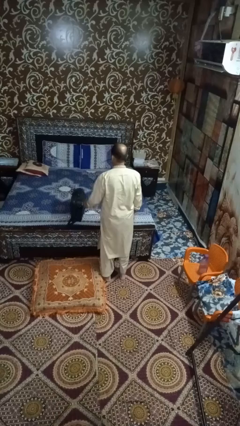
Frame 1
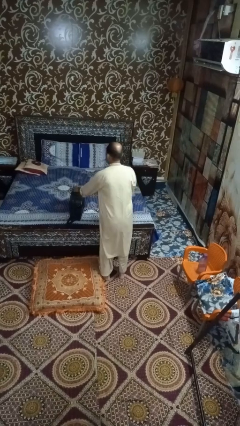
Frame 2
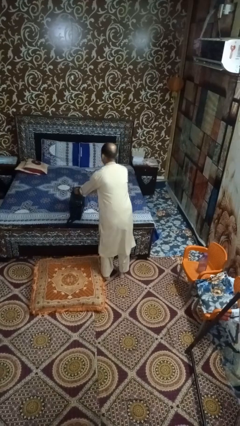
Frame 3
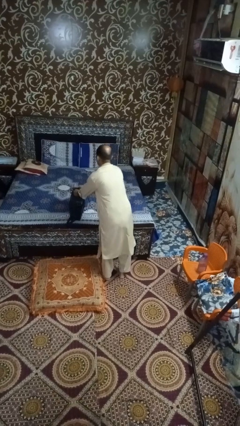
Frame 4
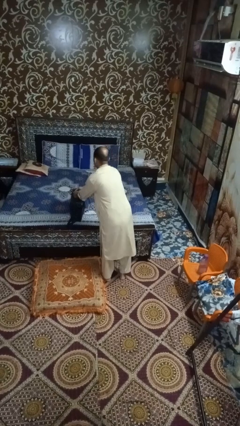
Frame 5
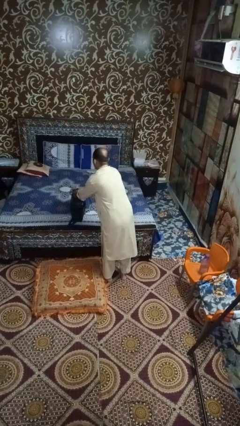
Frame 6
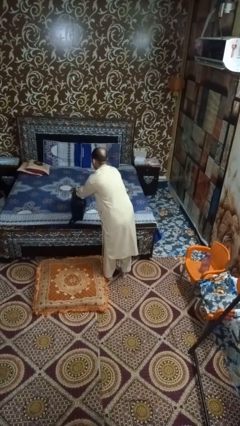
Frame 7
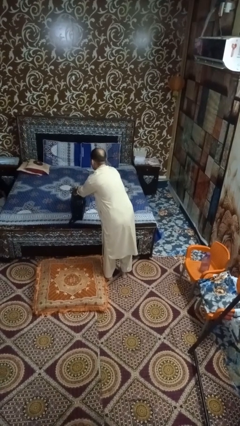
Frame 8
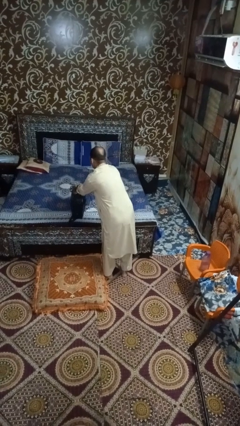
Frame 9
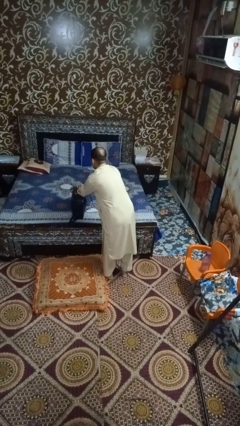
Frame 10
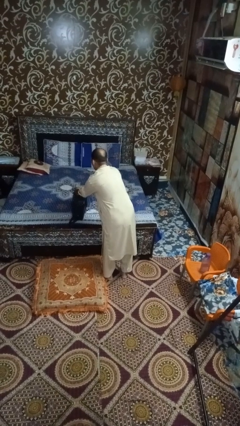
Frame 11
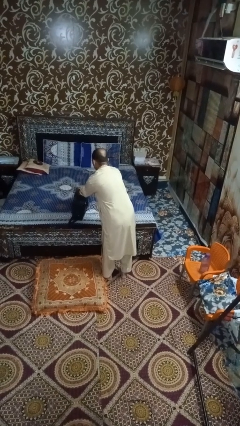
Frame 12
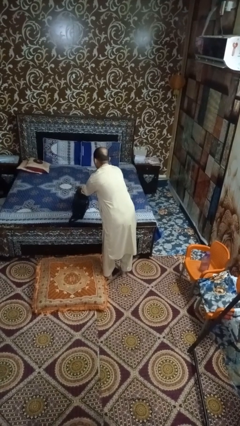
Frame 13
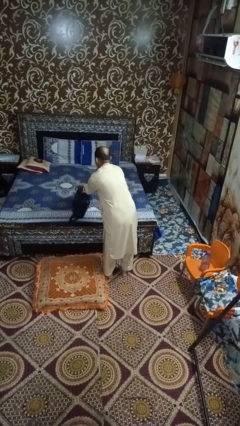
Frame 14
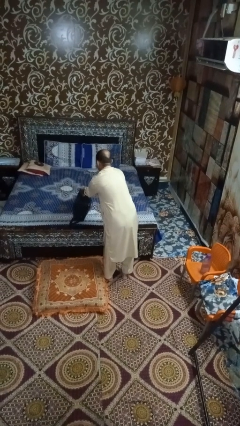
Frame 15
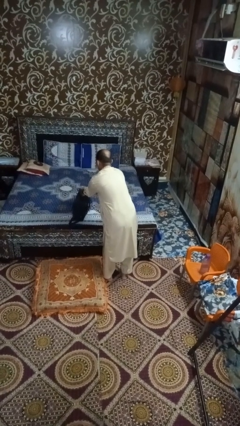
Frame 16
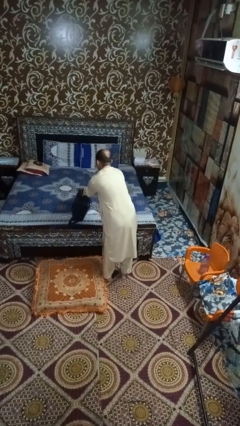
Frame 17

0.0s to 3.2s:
person picks up object from bed

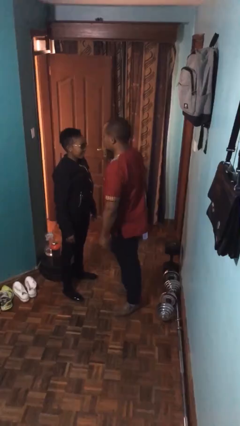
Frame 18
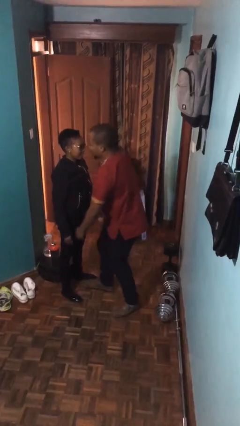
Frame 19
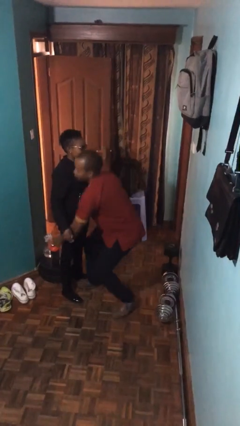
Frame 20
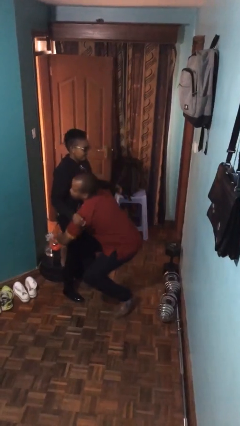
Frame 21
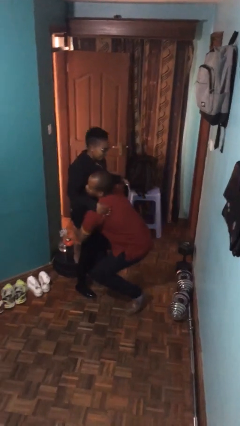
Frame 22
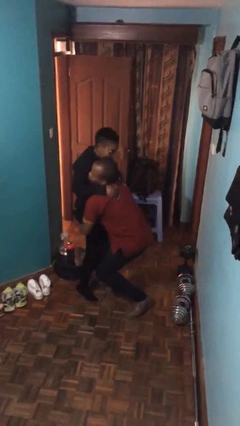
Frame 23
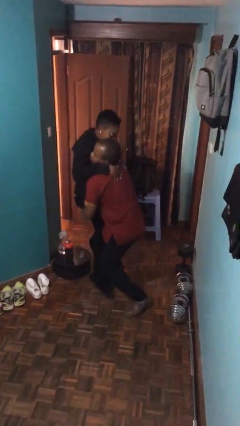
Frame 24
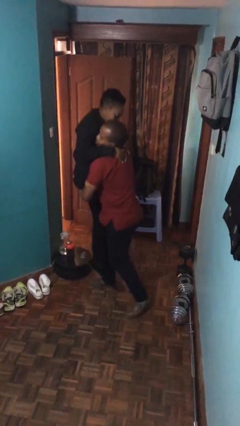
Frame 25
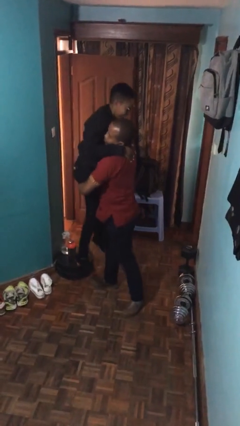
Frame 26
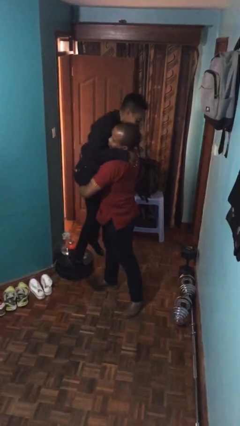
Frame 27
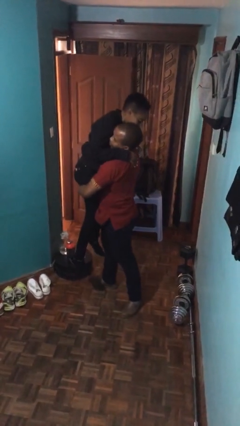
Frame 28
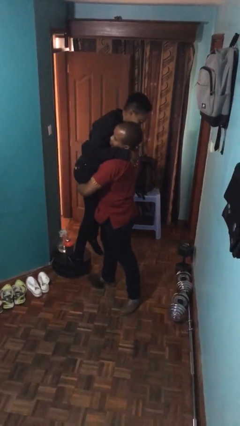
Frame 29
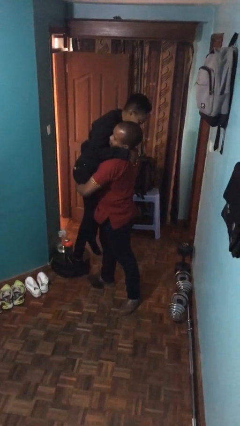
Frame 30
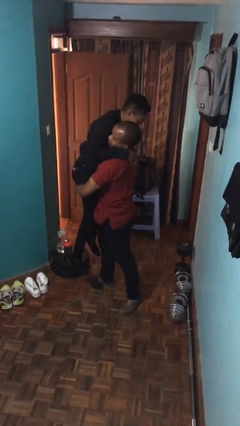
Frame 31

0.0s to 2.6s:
person picks up person

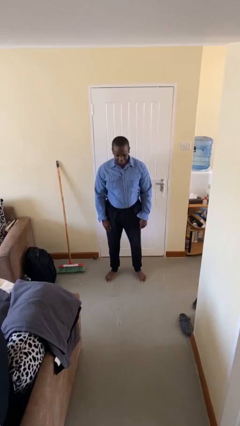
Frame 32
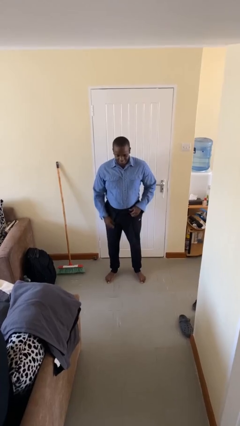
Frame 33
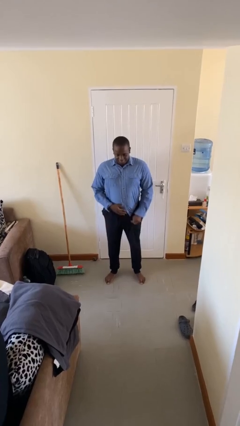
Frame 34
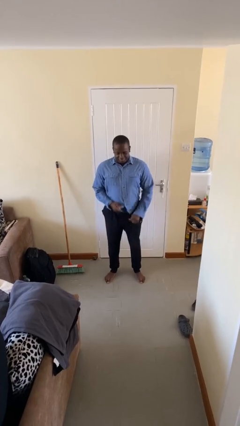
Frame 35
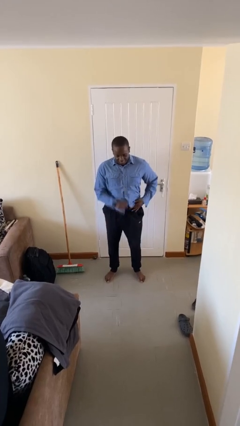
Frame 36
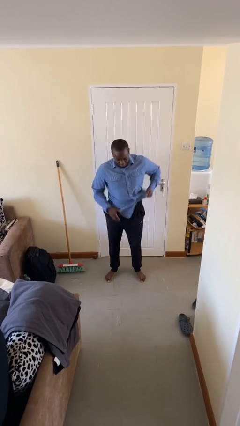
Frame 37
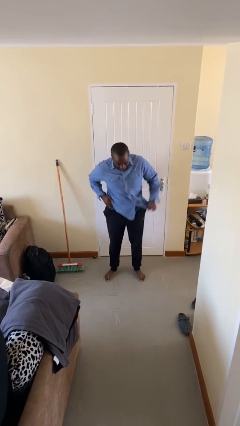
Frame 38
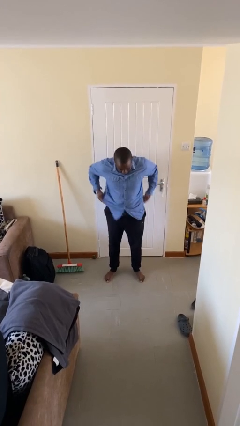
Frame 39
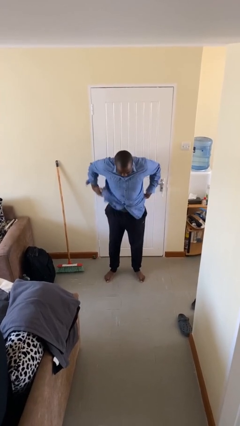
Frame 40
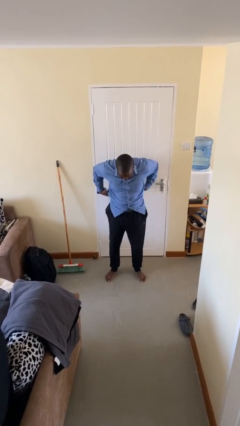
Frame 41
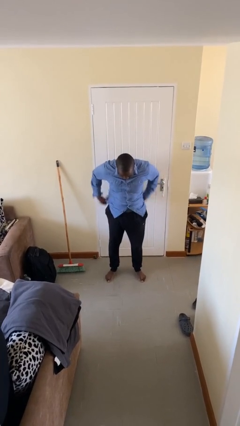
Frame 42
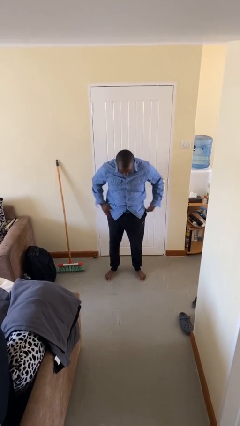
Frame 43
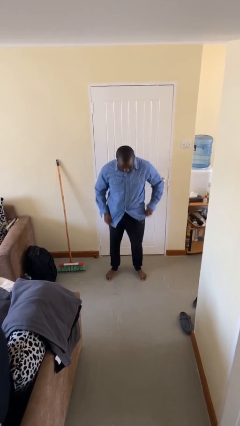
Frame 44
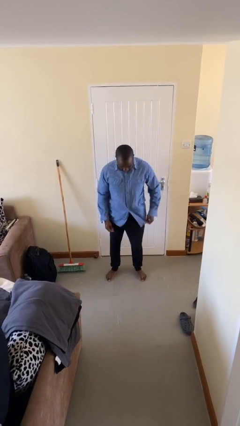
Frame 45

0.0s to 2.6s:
person untucks shirt

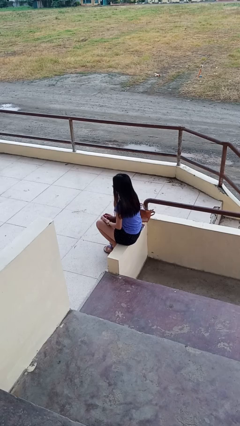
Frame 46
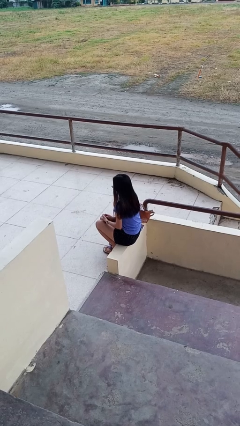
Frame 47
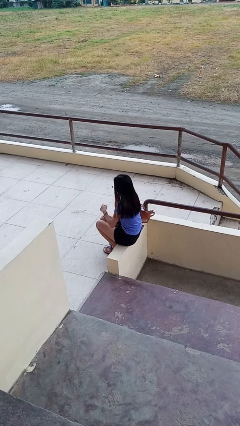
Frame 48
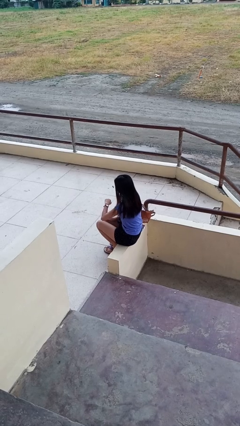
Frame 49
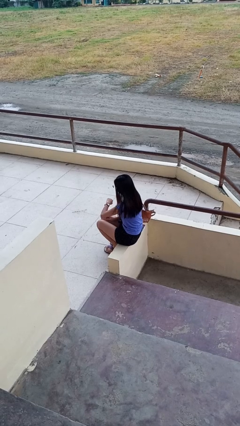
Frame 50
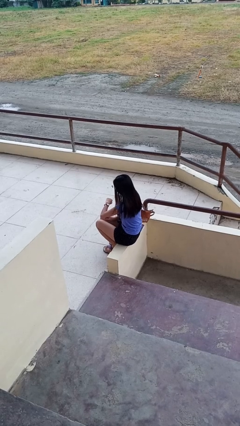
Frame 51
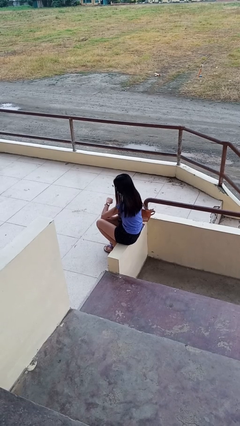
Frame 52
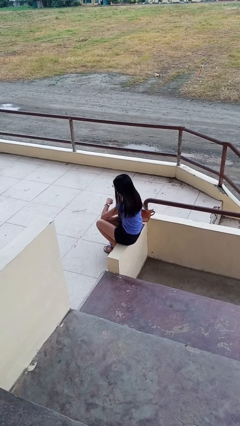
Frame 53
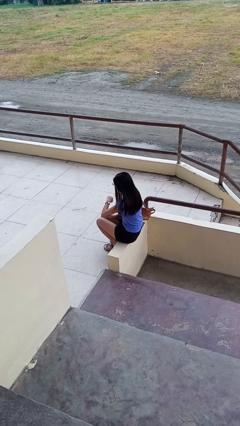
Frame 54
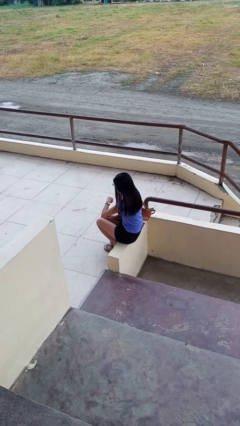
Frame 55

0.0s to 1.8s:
person looks at wristwatch

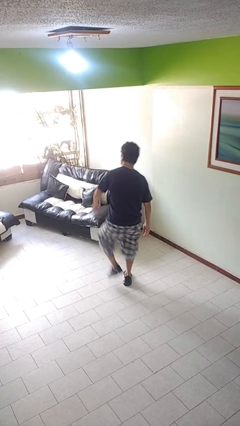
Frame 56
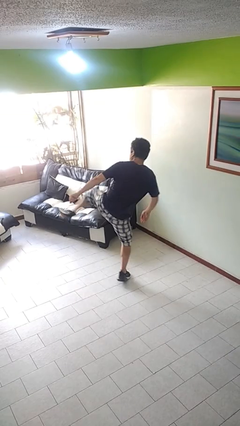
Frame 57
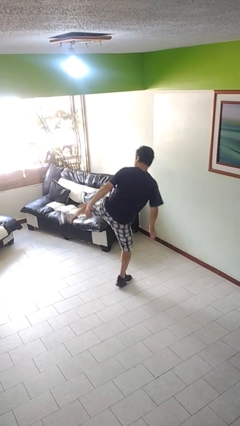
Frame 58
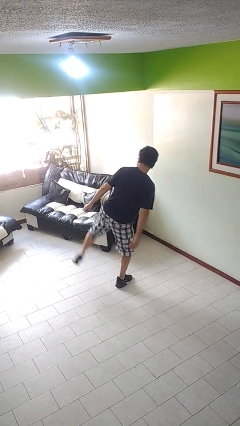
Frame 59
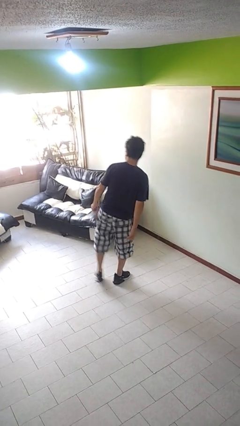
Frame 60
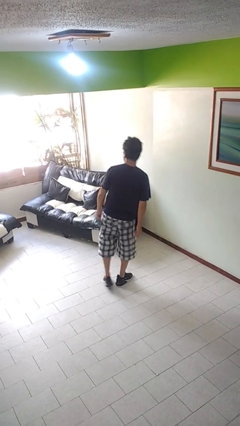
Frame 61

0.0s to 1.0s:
person karate kicks

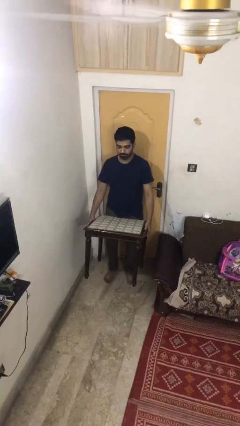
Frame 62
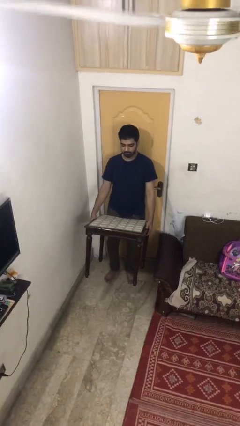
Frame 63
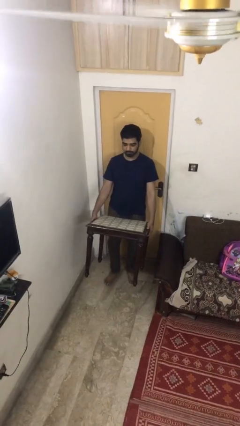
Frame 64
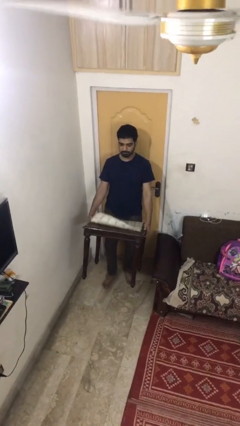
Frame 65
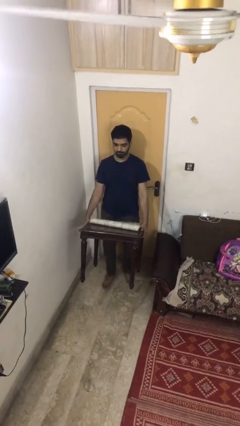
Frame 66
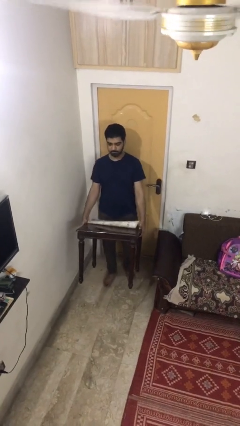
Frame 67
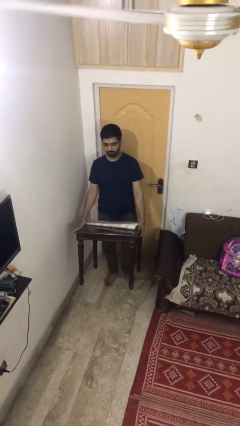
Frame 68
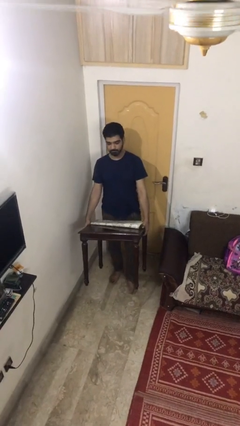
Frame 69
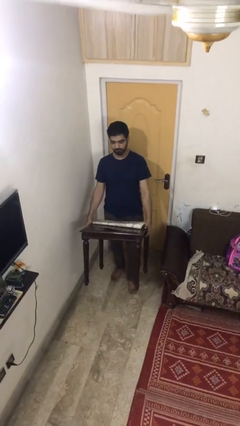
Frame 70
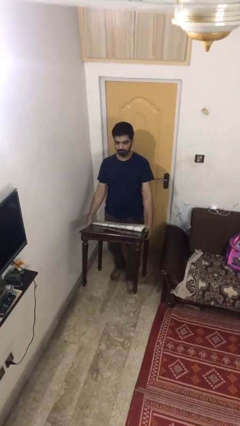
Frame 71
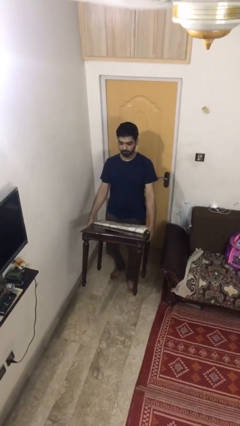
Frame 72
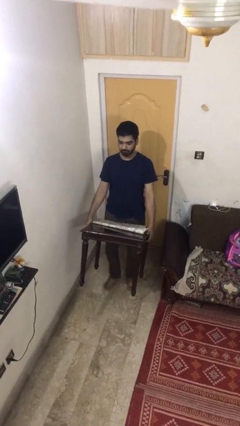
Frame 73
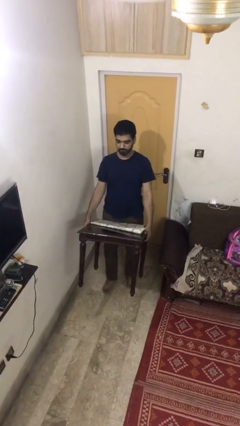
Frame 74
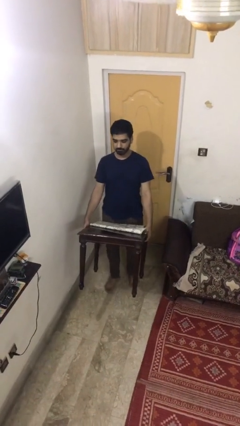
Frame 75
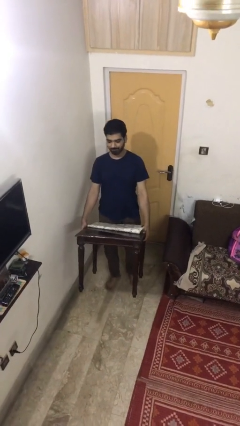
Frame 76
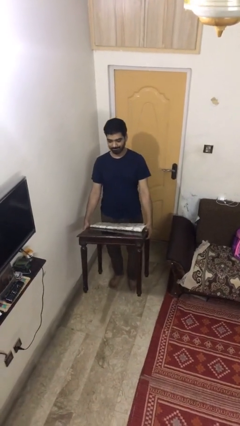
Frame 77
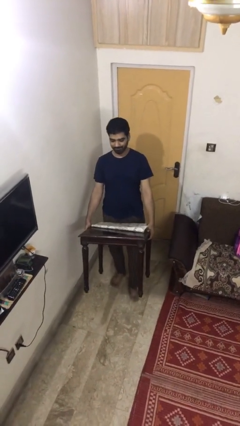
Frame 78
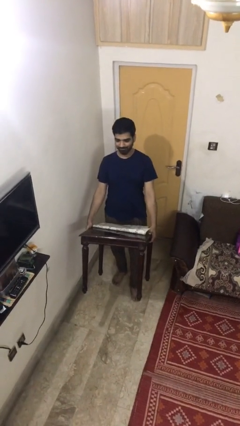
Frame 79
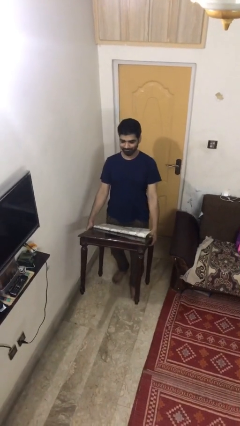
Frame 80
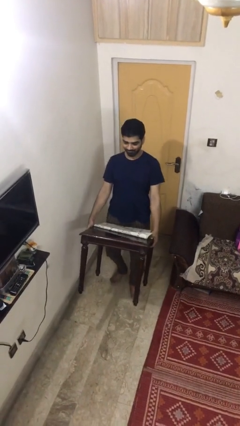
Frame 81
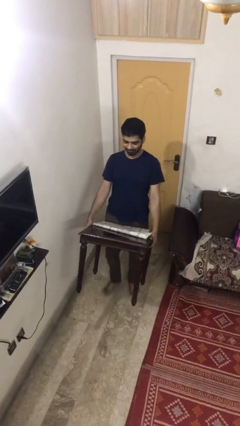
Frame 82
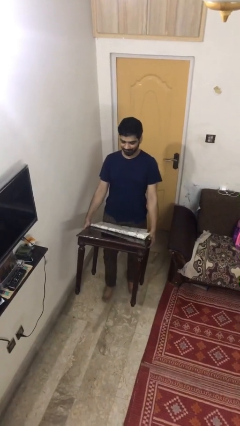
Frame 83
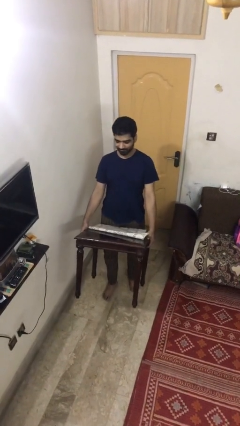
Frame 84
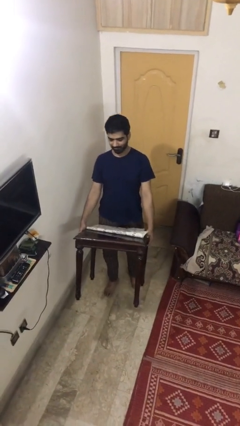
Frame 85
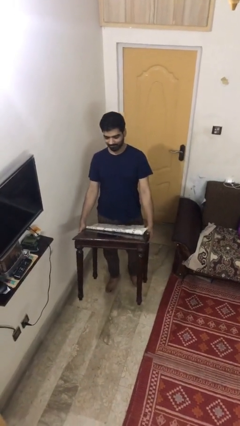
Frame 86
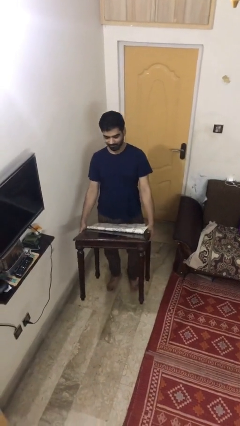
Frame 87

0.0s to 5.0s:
person carries heavy object

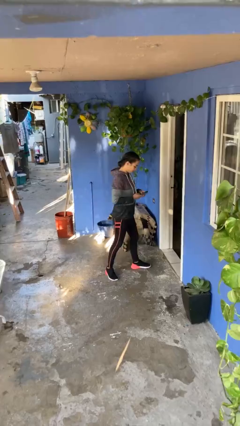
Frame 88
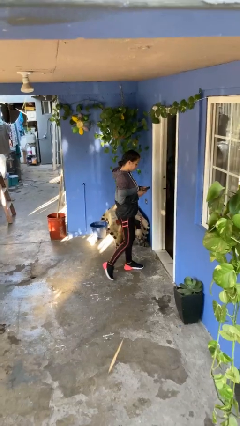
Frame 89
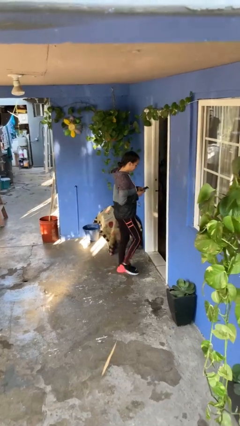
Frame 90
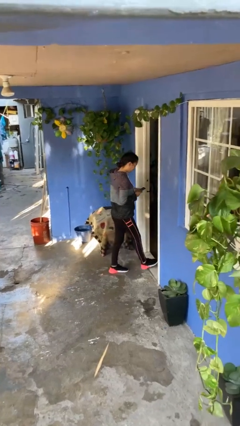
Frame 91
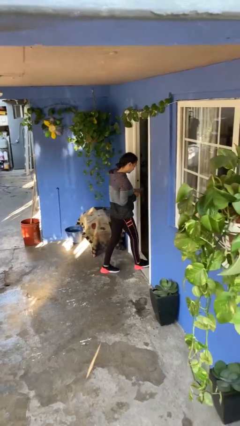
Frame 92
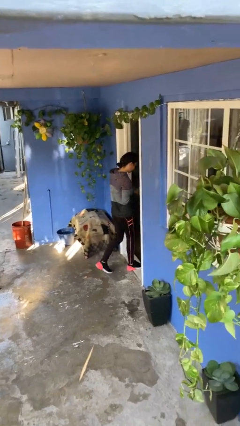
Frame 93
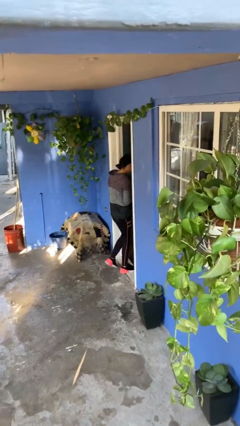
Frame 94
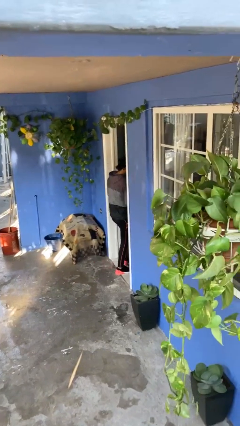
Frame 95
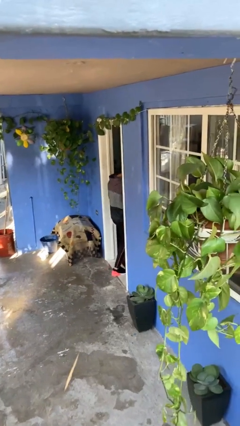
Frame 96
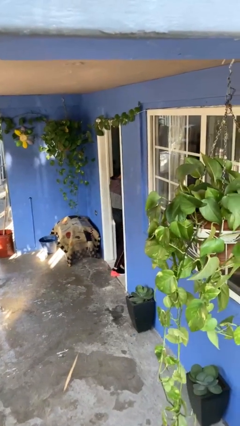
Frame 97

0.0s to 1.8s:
person exits scene through structure
